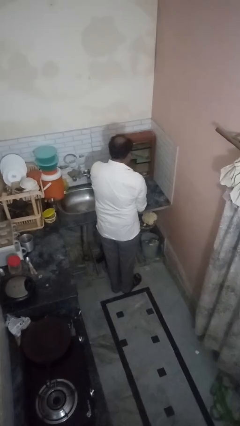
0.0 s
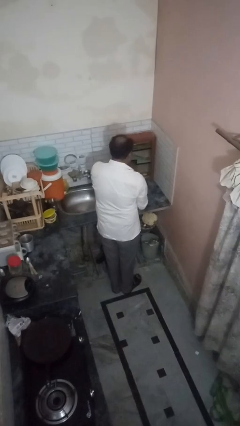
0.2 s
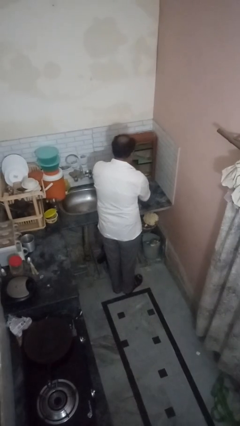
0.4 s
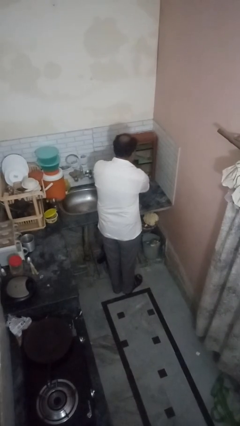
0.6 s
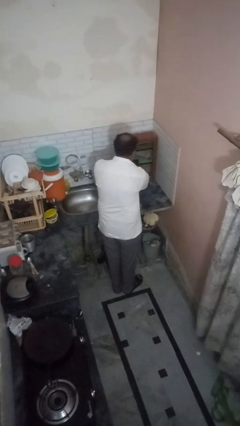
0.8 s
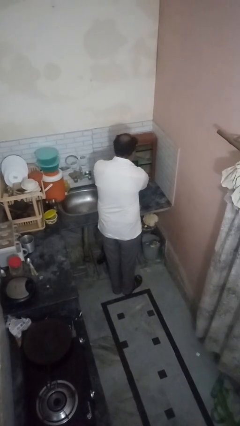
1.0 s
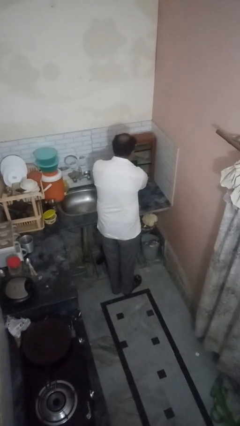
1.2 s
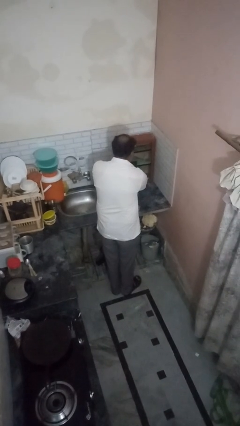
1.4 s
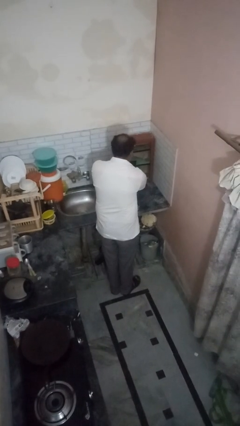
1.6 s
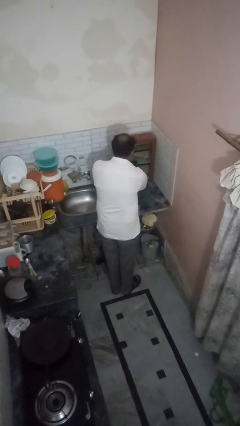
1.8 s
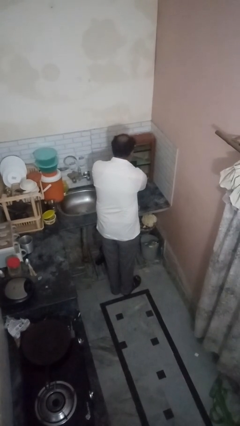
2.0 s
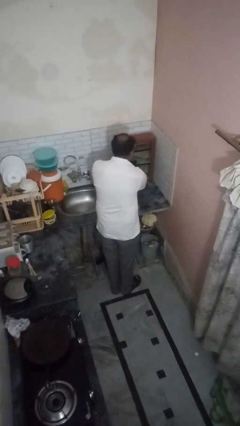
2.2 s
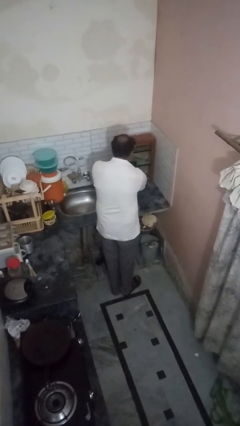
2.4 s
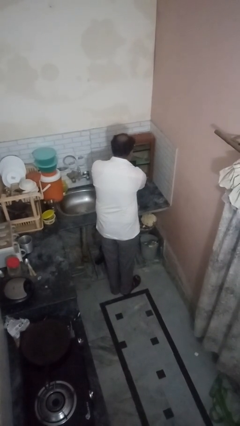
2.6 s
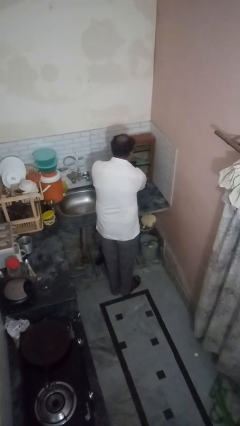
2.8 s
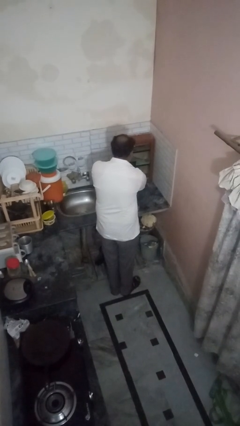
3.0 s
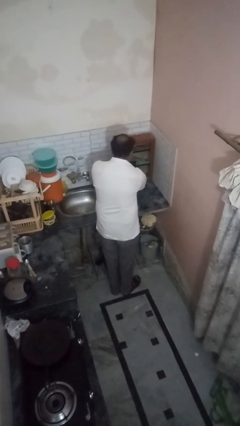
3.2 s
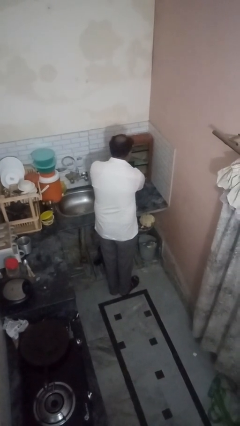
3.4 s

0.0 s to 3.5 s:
person searches in kitchen drawer

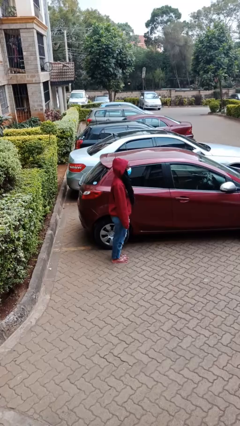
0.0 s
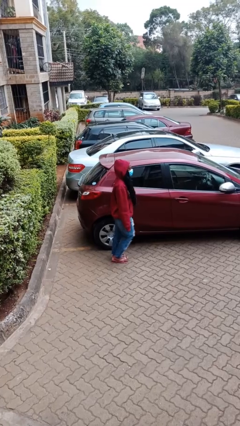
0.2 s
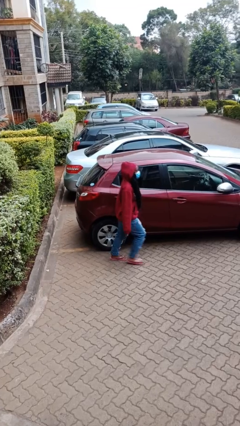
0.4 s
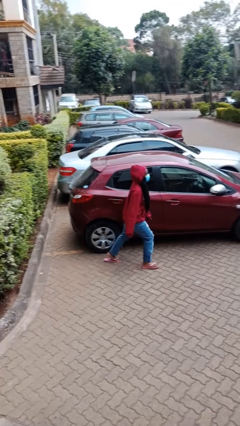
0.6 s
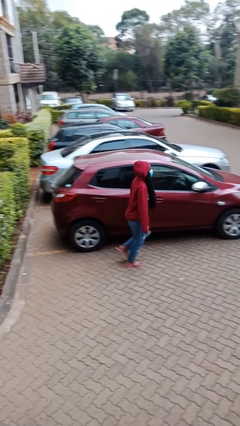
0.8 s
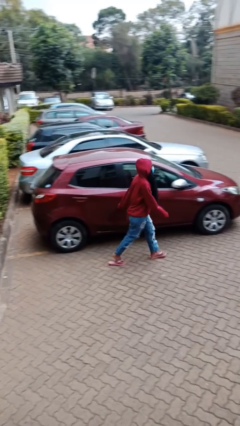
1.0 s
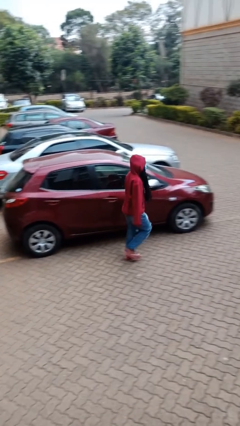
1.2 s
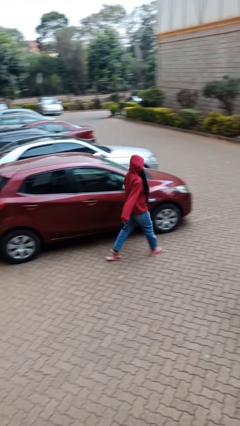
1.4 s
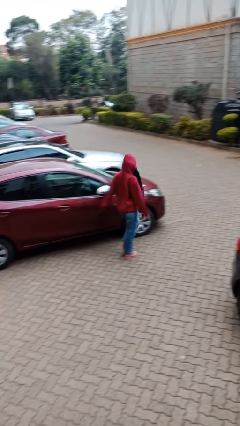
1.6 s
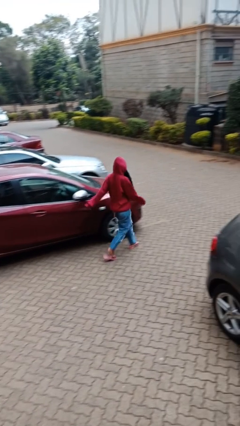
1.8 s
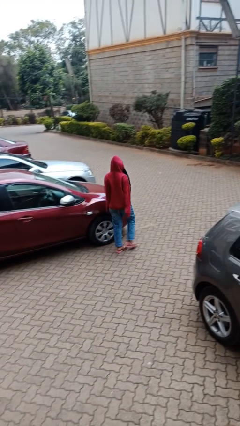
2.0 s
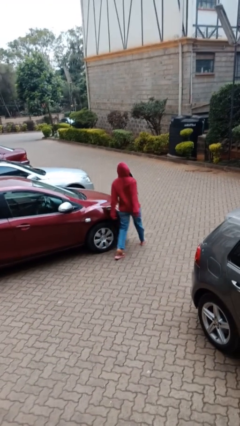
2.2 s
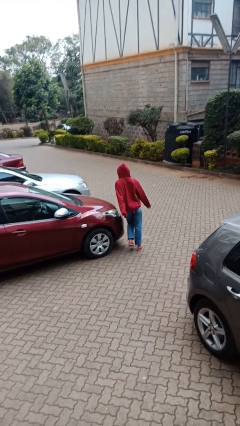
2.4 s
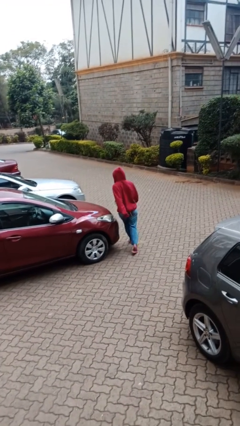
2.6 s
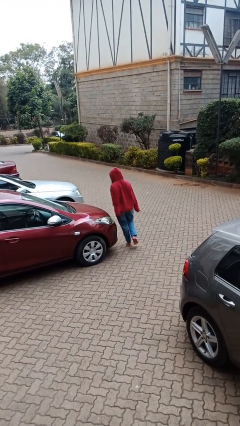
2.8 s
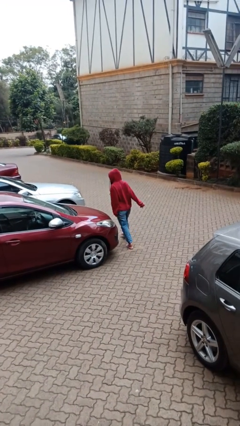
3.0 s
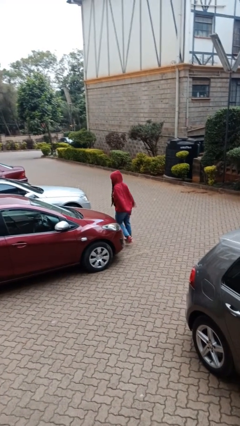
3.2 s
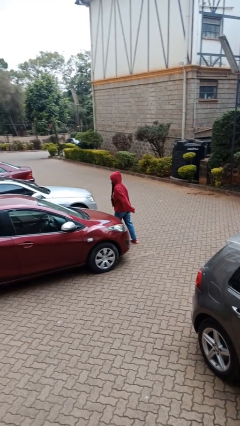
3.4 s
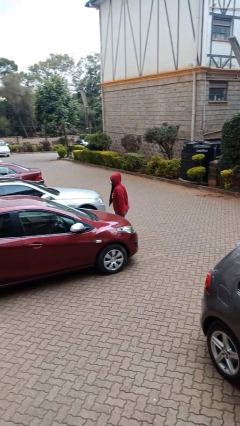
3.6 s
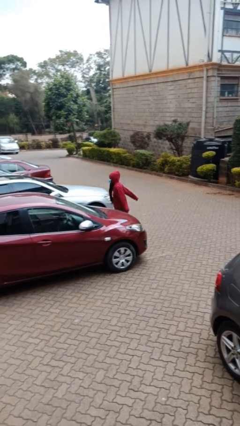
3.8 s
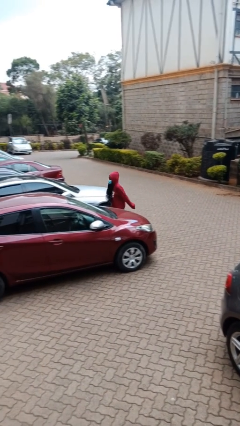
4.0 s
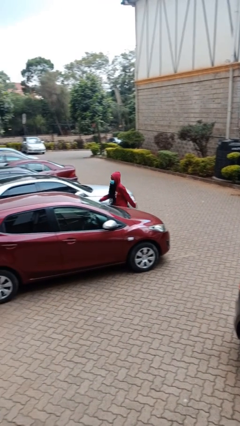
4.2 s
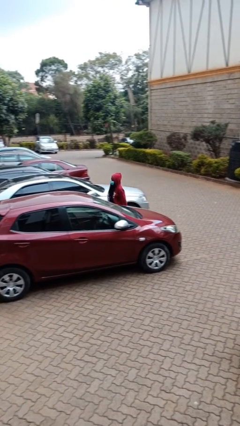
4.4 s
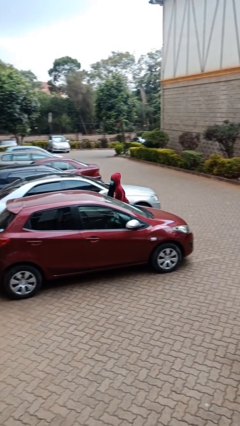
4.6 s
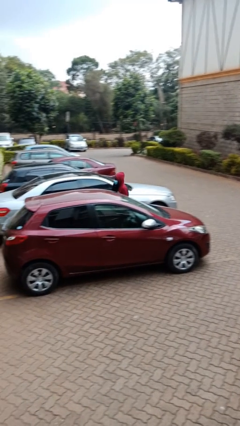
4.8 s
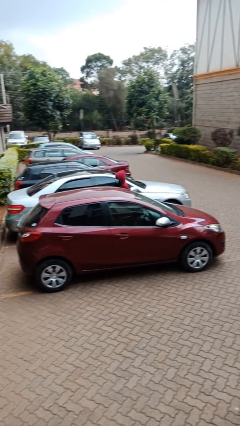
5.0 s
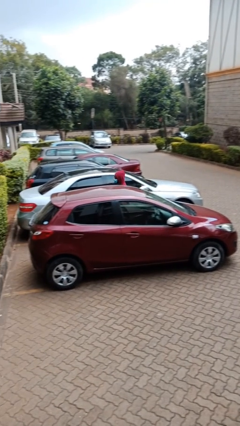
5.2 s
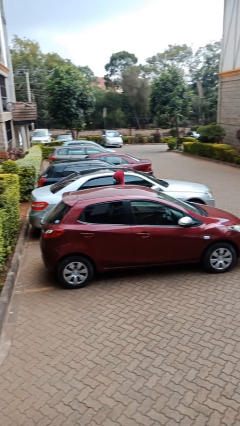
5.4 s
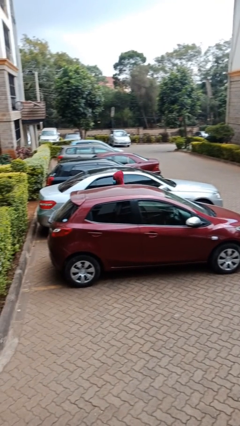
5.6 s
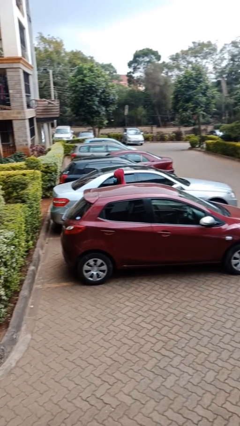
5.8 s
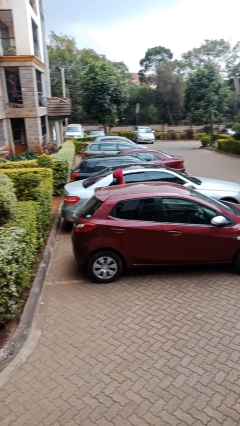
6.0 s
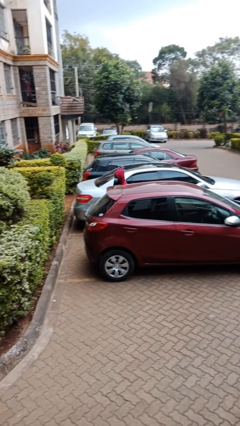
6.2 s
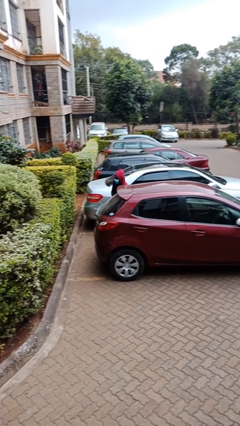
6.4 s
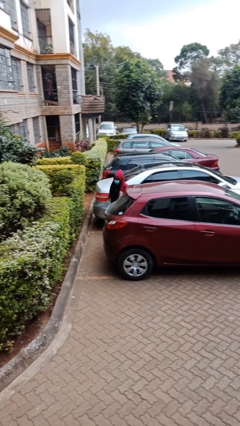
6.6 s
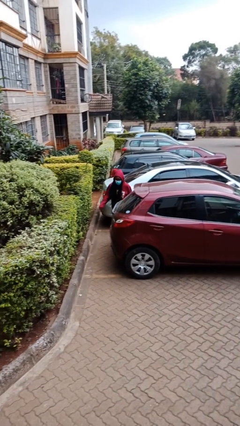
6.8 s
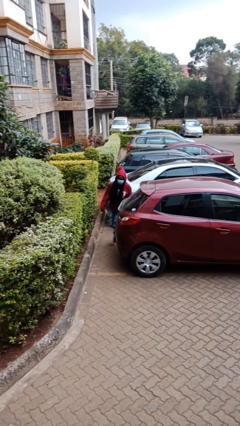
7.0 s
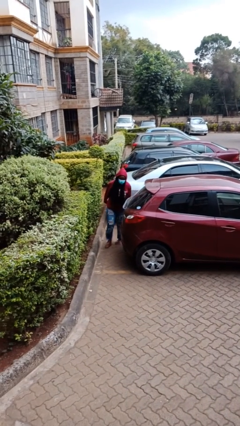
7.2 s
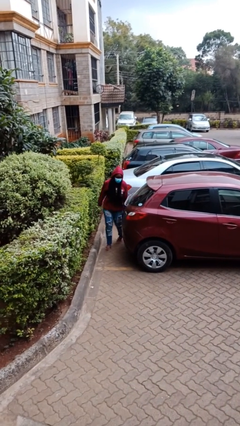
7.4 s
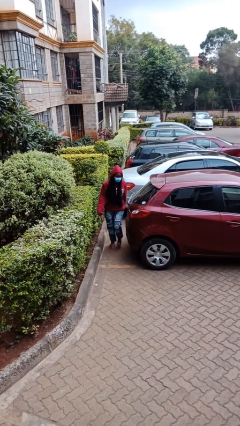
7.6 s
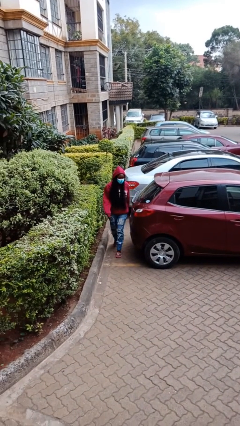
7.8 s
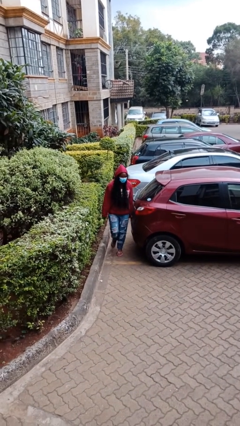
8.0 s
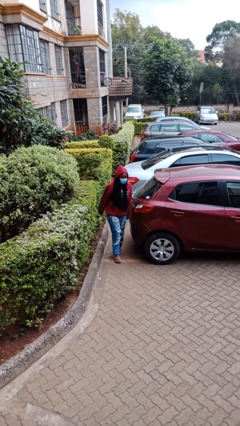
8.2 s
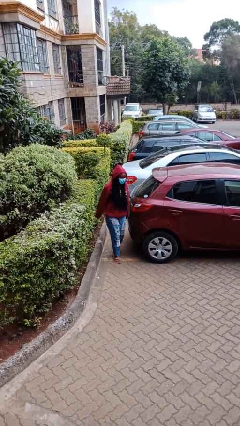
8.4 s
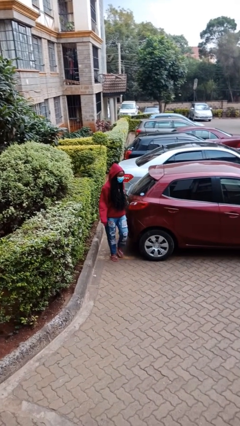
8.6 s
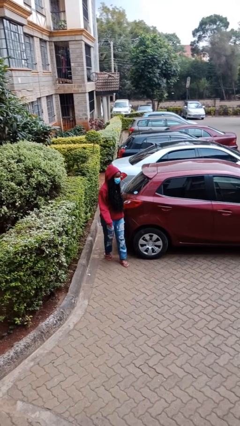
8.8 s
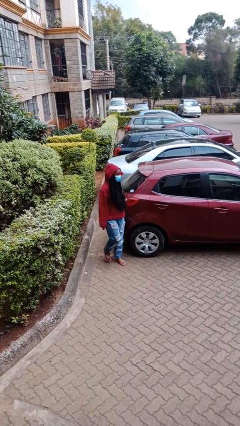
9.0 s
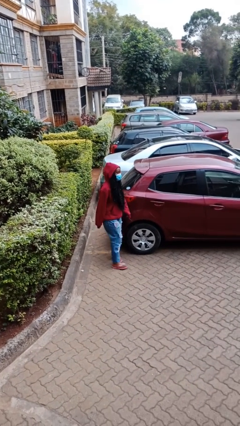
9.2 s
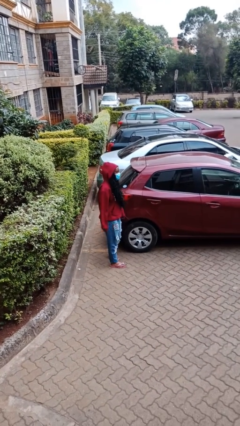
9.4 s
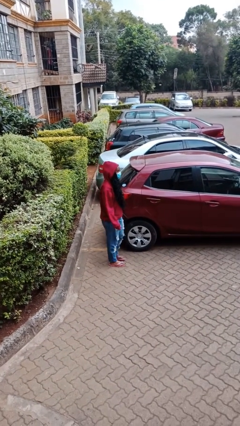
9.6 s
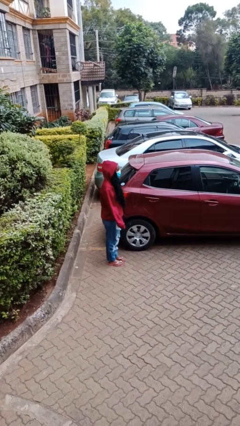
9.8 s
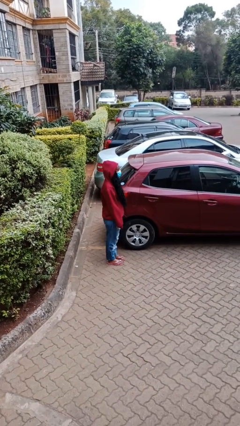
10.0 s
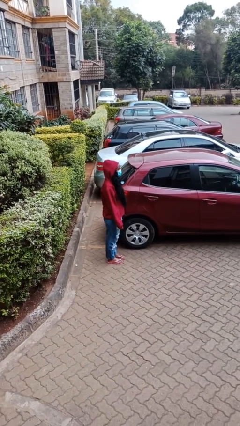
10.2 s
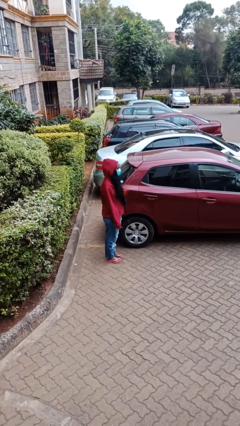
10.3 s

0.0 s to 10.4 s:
person walks around car

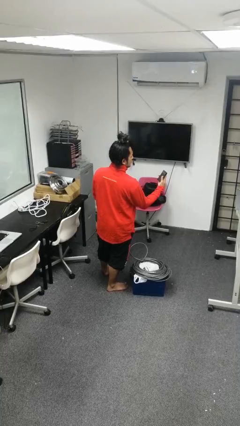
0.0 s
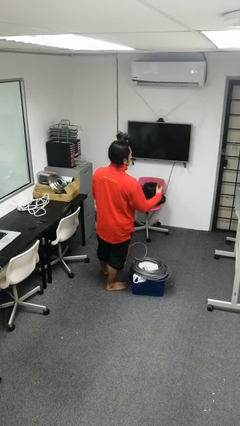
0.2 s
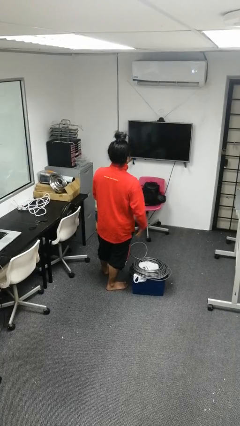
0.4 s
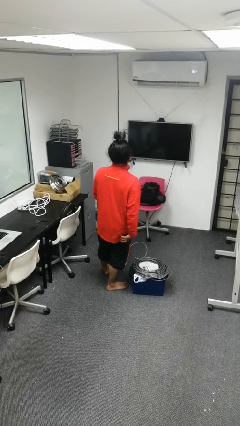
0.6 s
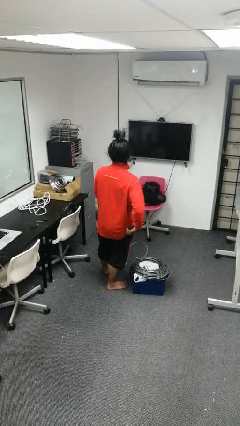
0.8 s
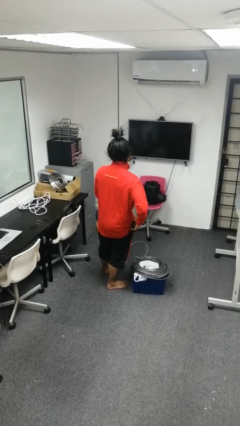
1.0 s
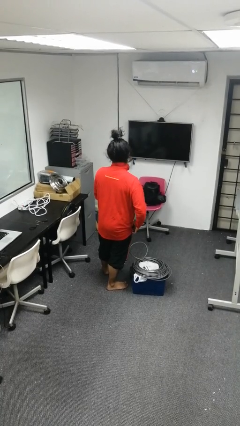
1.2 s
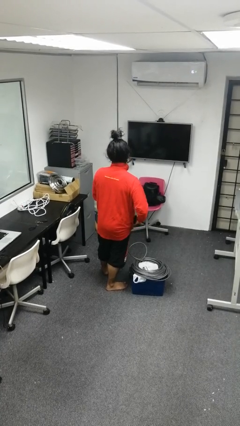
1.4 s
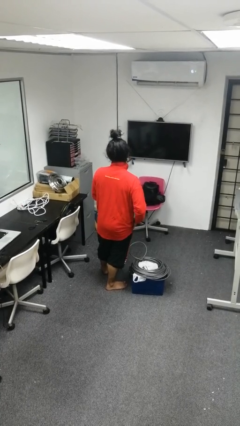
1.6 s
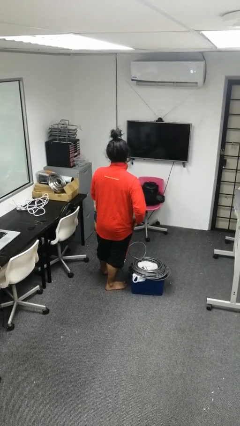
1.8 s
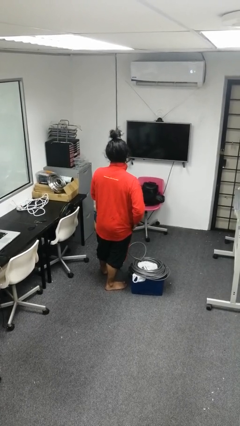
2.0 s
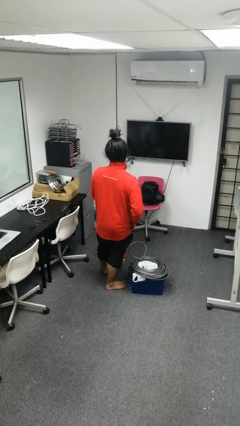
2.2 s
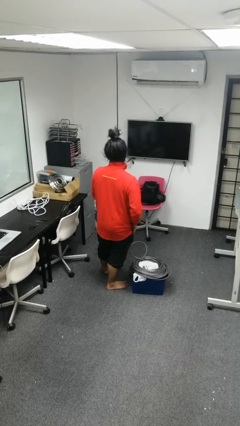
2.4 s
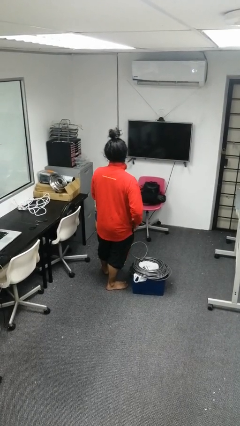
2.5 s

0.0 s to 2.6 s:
person puts phone into pocket

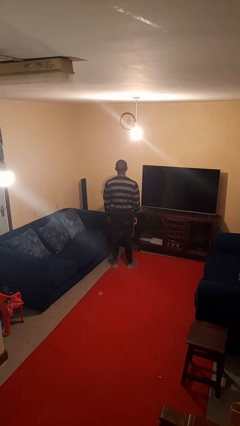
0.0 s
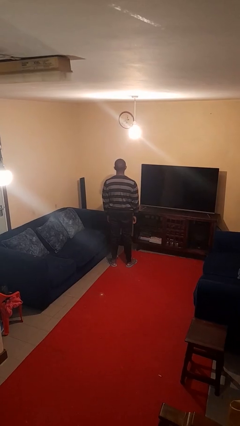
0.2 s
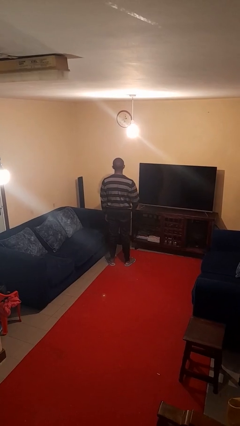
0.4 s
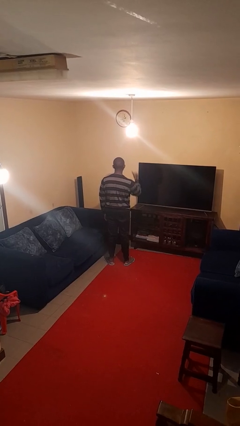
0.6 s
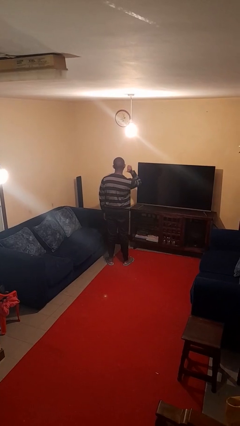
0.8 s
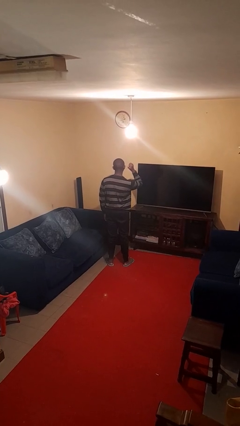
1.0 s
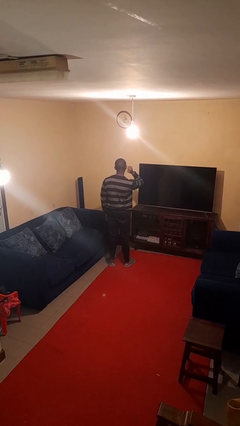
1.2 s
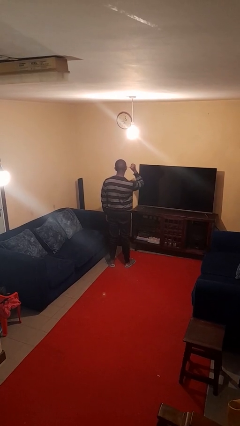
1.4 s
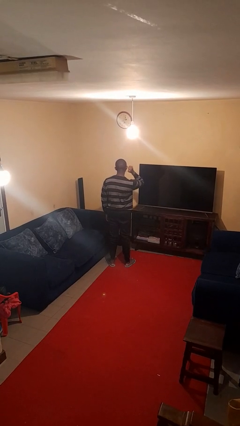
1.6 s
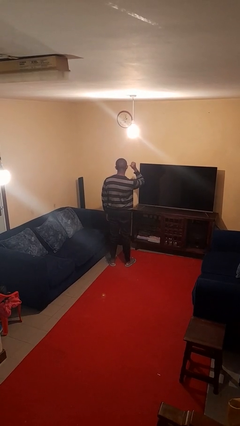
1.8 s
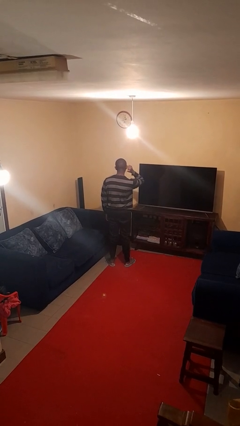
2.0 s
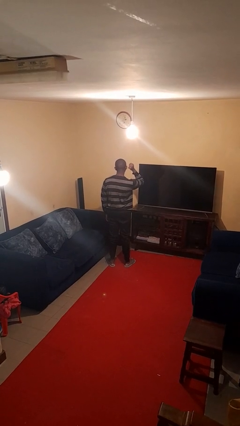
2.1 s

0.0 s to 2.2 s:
person gestures behind me
